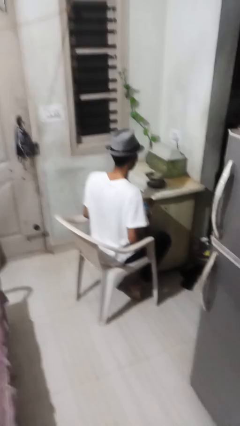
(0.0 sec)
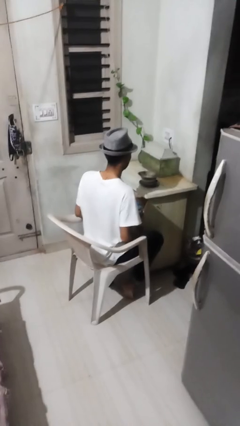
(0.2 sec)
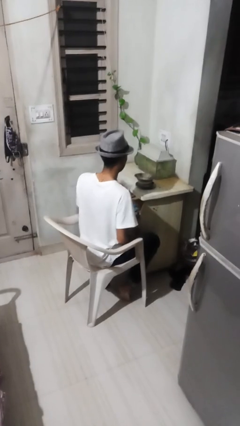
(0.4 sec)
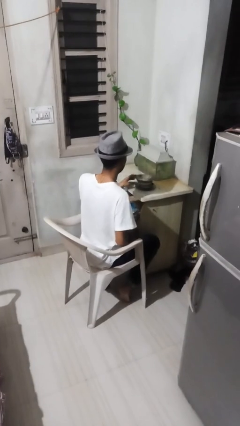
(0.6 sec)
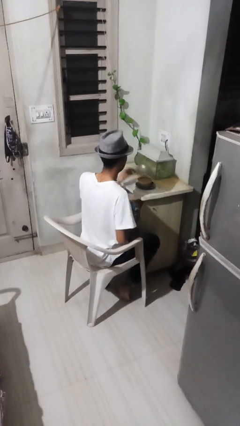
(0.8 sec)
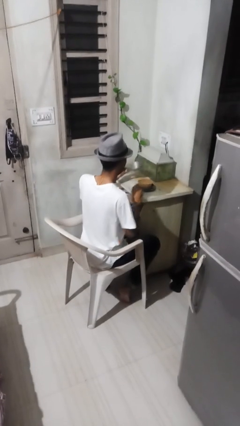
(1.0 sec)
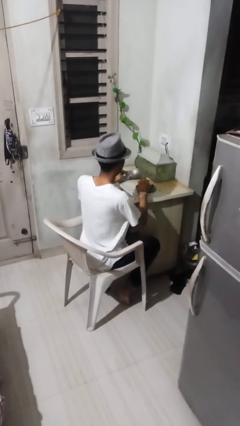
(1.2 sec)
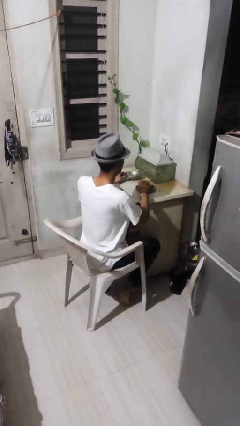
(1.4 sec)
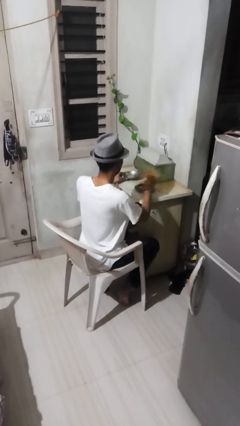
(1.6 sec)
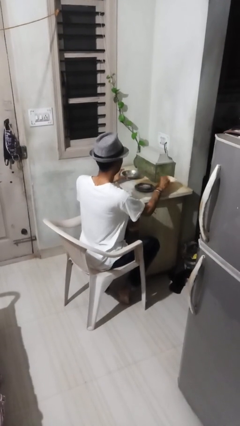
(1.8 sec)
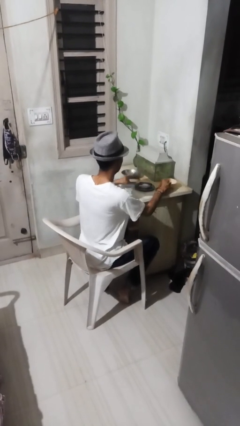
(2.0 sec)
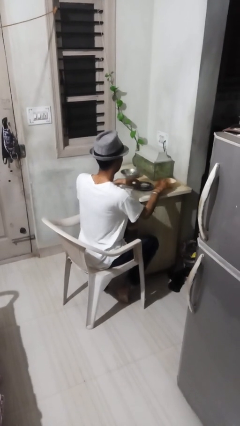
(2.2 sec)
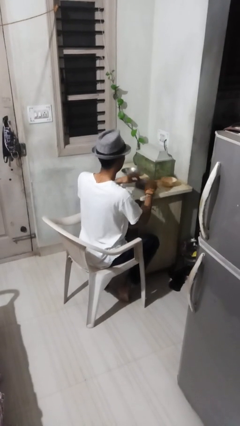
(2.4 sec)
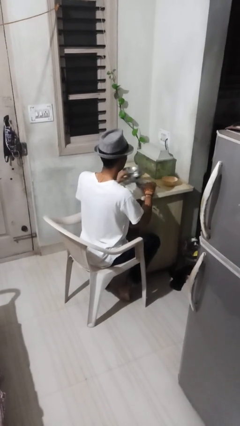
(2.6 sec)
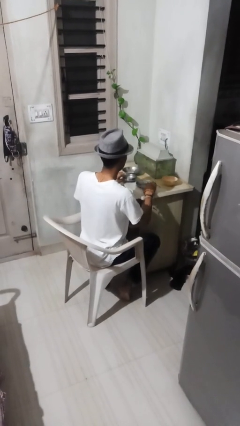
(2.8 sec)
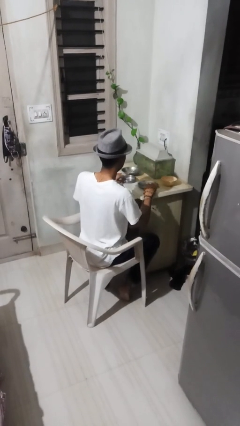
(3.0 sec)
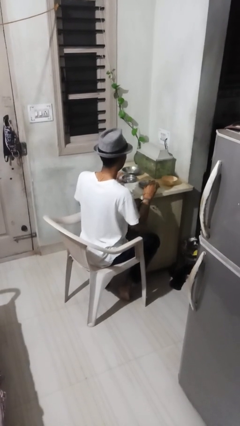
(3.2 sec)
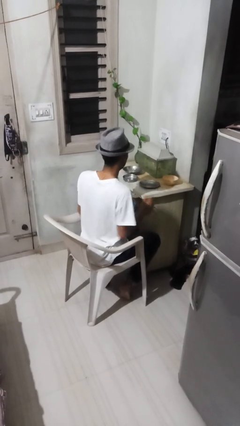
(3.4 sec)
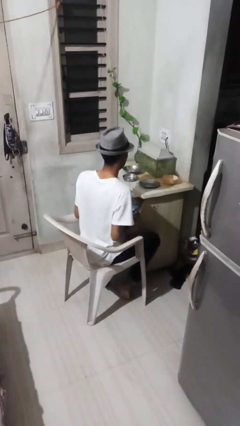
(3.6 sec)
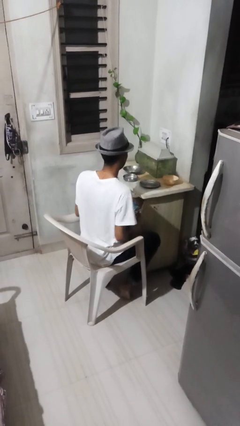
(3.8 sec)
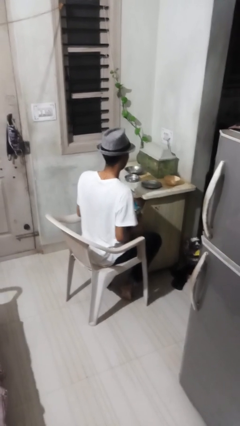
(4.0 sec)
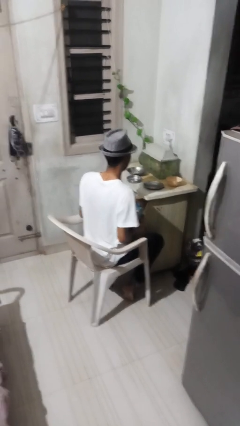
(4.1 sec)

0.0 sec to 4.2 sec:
person sets table

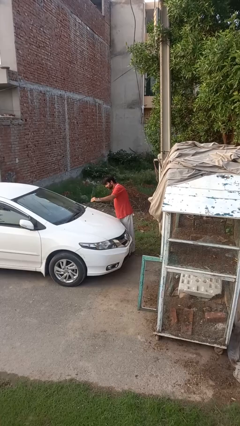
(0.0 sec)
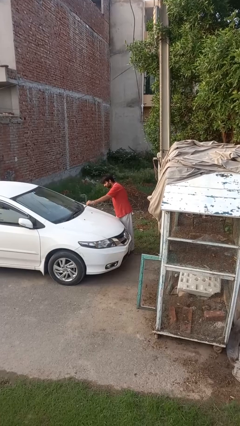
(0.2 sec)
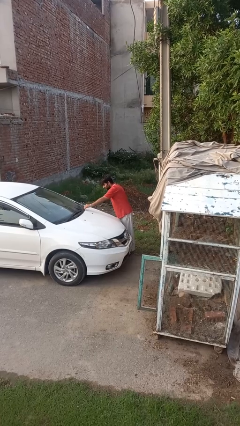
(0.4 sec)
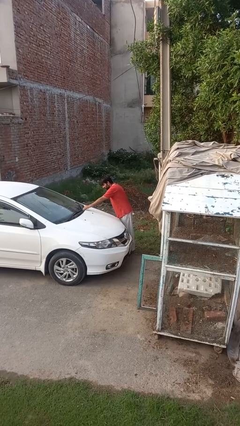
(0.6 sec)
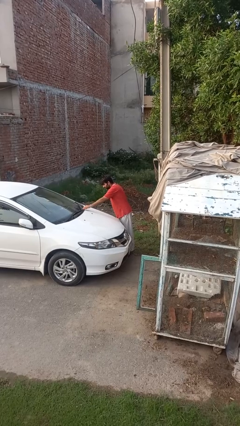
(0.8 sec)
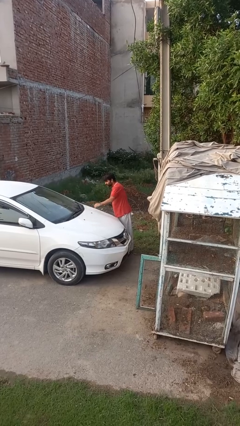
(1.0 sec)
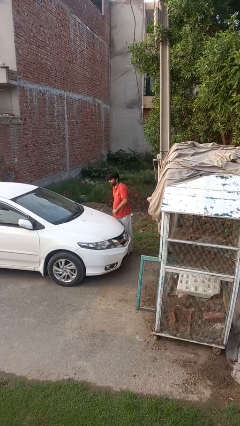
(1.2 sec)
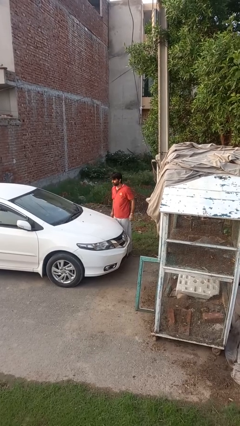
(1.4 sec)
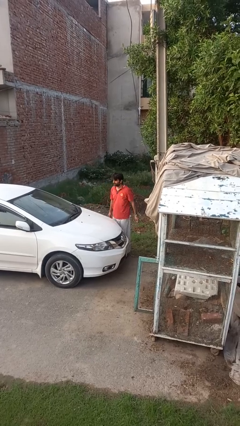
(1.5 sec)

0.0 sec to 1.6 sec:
person flips down car wipers

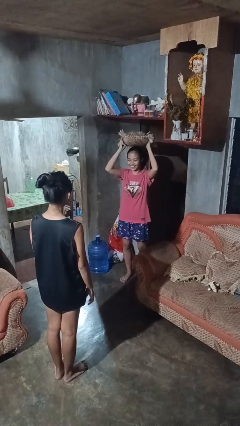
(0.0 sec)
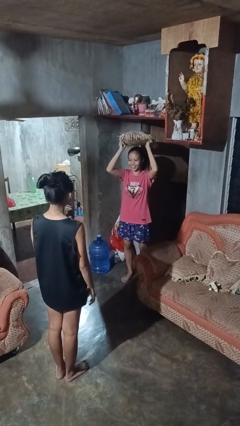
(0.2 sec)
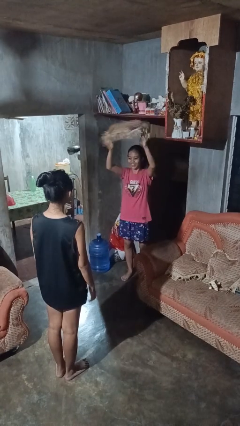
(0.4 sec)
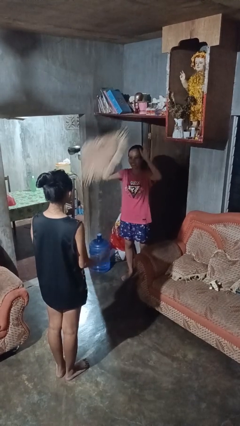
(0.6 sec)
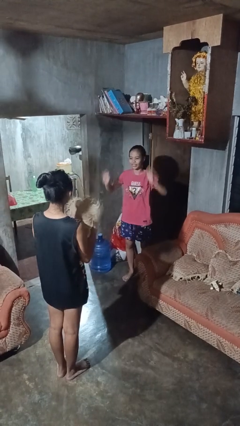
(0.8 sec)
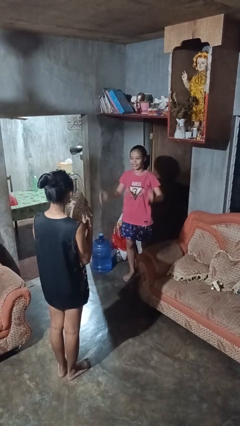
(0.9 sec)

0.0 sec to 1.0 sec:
person throws object to person

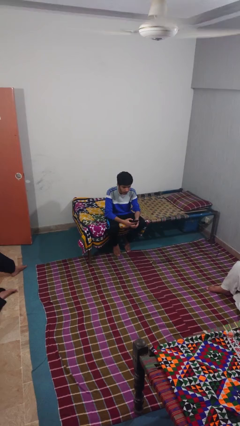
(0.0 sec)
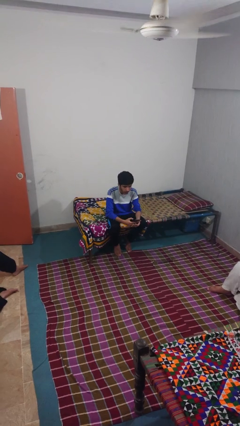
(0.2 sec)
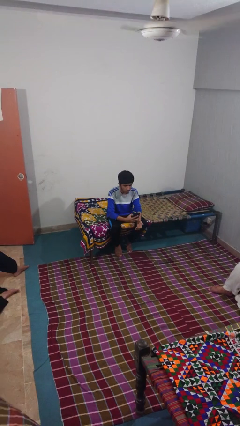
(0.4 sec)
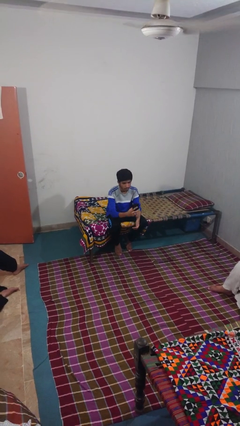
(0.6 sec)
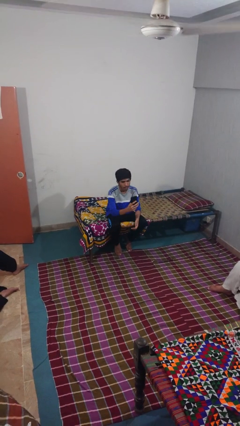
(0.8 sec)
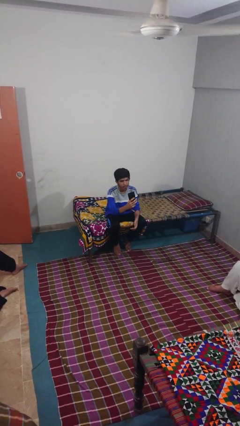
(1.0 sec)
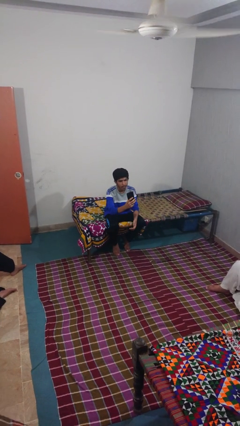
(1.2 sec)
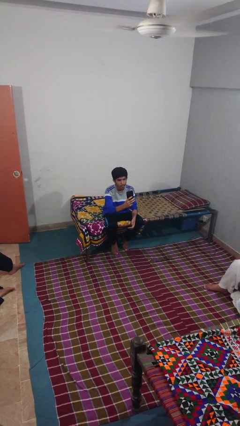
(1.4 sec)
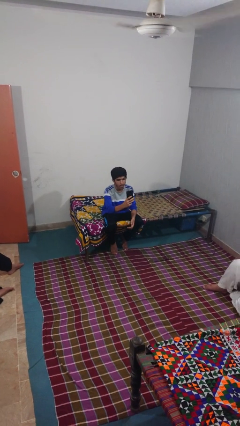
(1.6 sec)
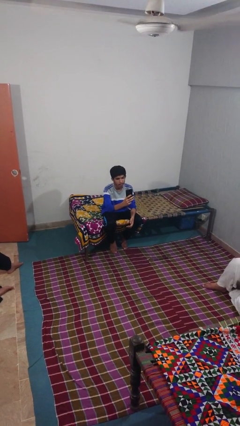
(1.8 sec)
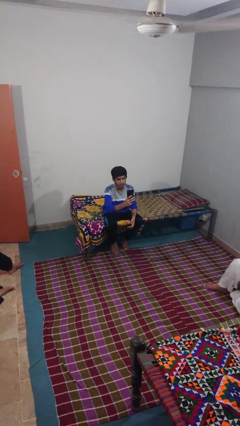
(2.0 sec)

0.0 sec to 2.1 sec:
person takes selfie

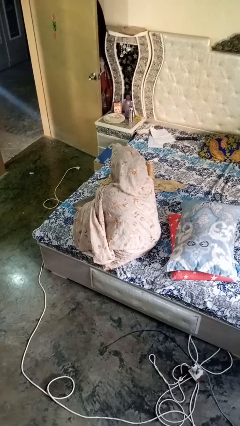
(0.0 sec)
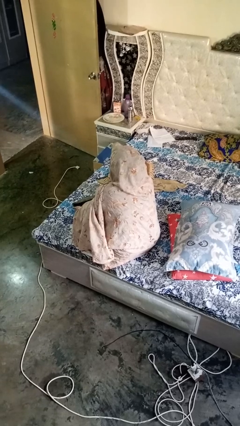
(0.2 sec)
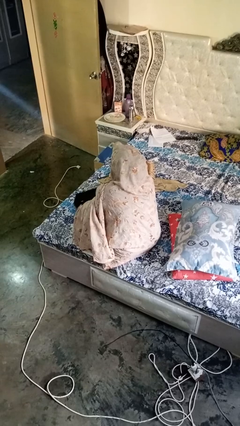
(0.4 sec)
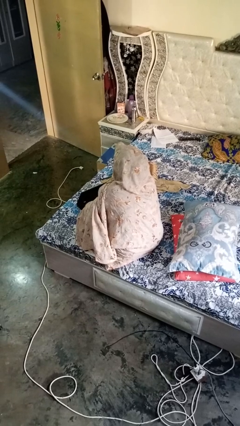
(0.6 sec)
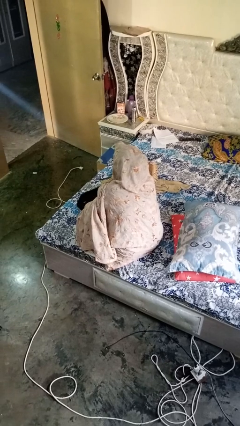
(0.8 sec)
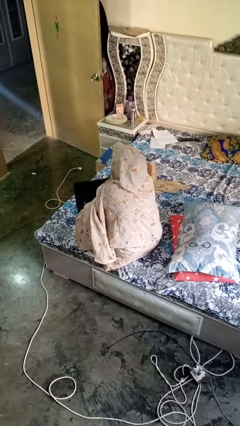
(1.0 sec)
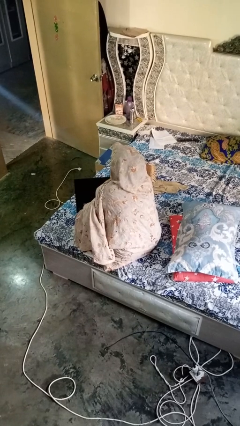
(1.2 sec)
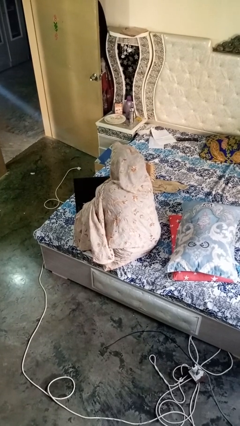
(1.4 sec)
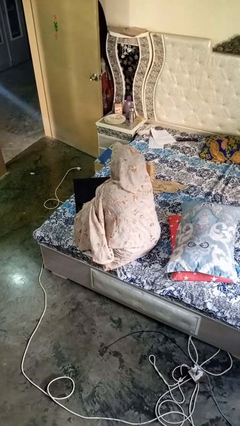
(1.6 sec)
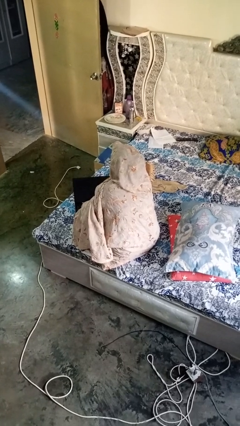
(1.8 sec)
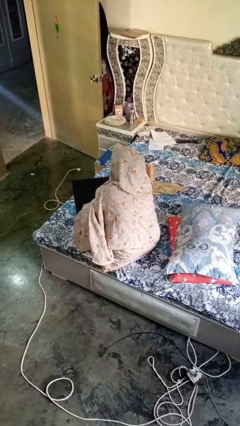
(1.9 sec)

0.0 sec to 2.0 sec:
person opens laptop

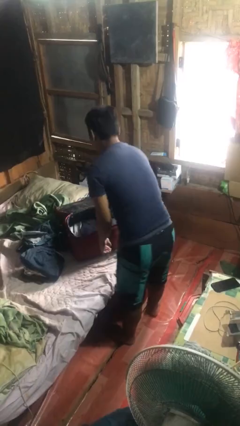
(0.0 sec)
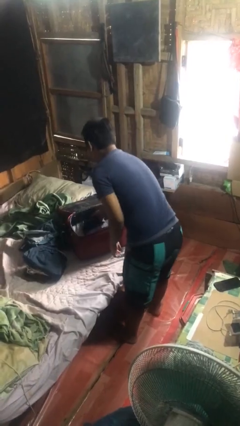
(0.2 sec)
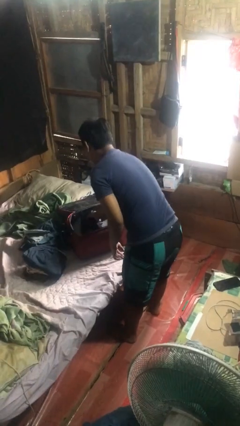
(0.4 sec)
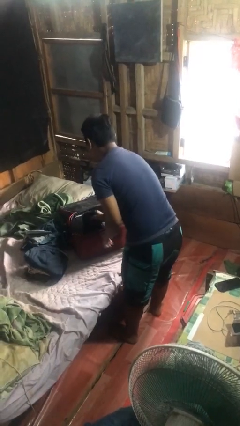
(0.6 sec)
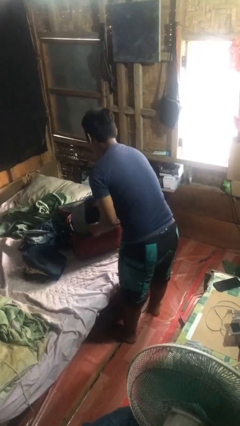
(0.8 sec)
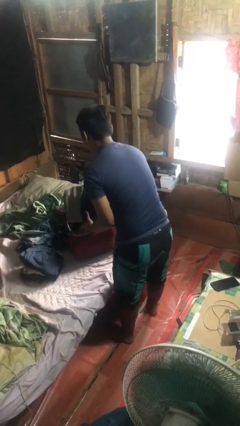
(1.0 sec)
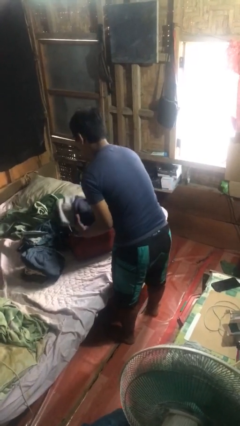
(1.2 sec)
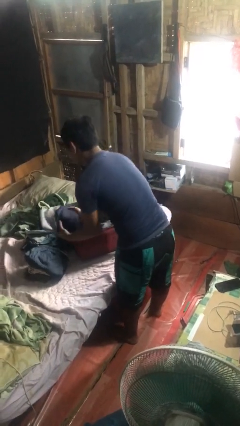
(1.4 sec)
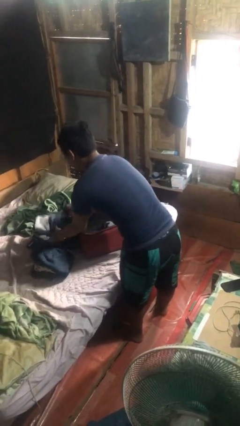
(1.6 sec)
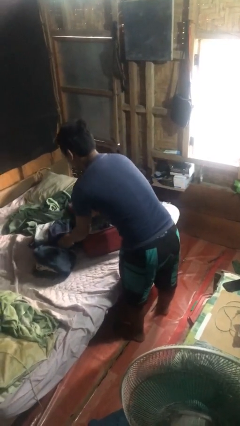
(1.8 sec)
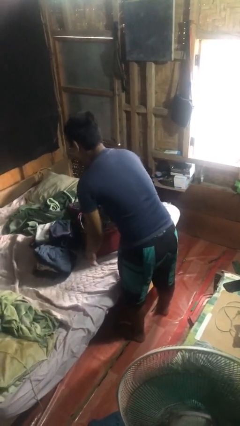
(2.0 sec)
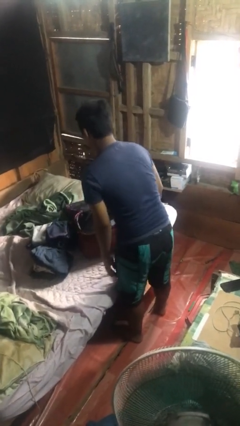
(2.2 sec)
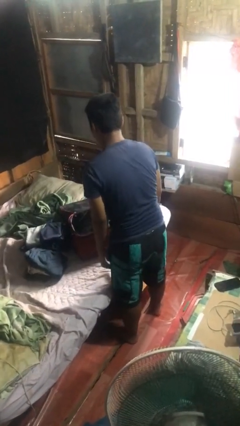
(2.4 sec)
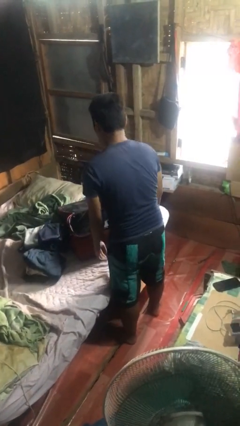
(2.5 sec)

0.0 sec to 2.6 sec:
person unloads clothes from suitcase

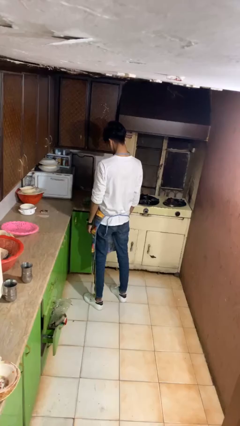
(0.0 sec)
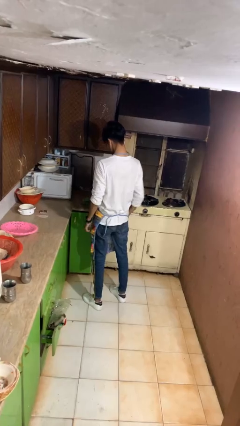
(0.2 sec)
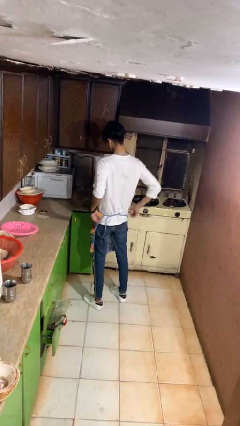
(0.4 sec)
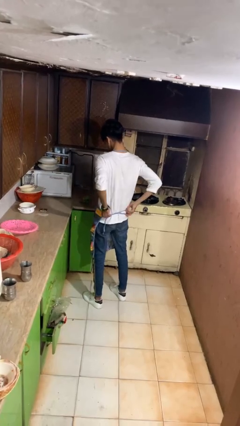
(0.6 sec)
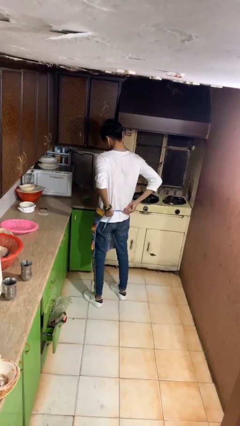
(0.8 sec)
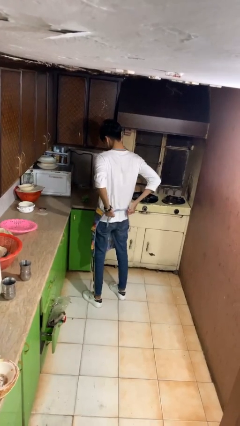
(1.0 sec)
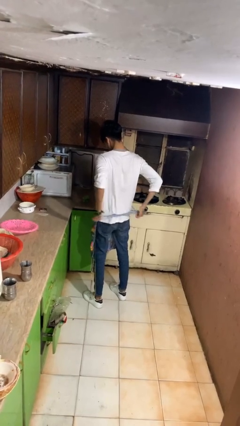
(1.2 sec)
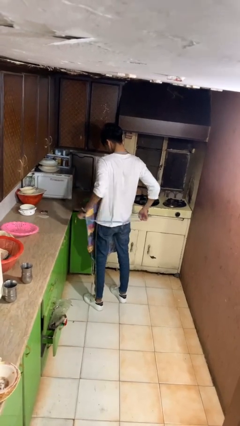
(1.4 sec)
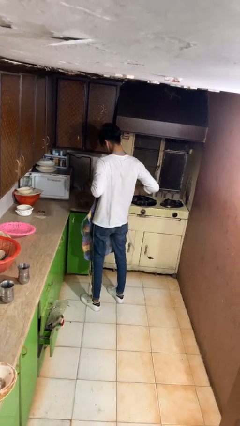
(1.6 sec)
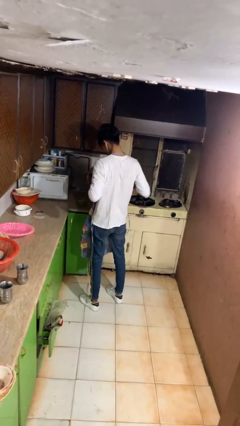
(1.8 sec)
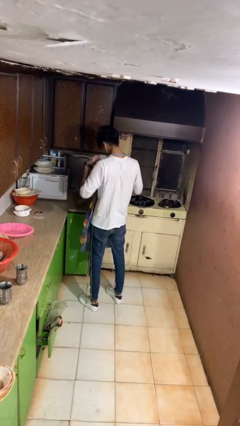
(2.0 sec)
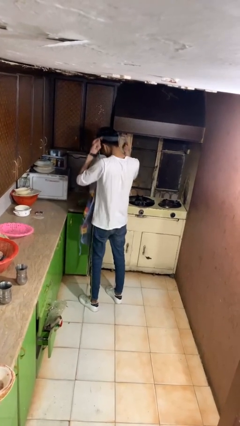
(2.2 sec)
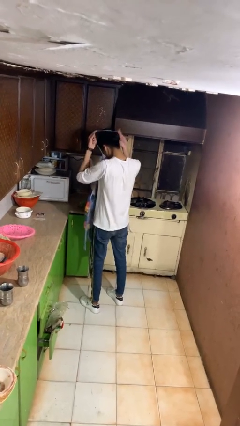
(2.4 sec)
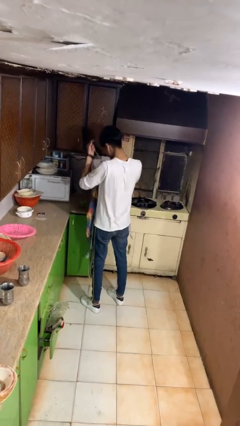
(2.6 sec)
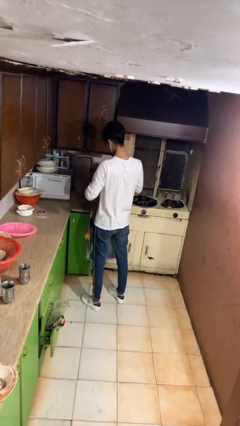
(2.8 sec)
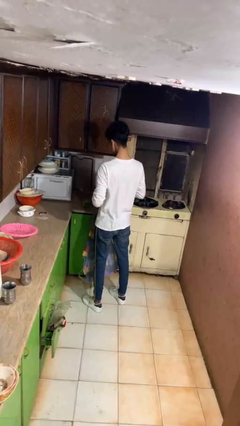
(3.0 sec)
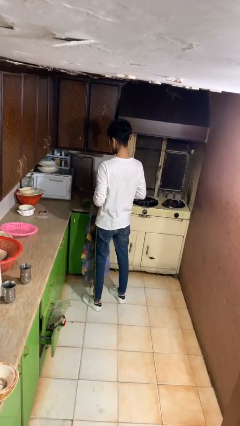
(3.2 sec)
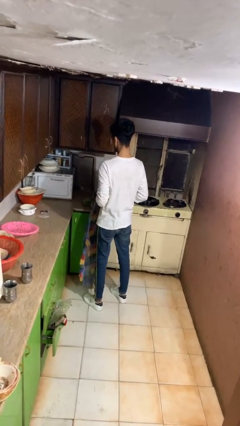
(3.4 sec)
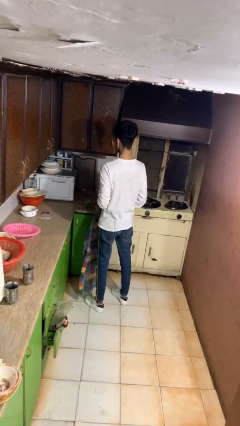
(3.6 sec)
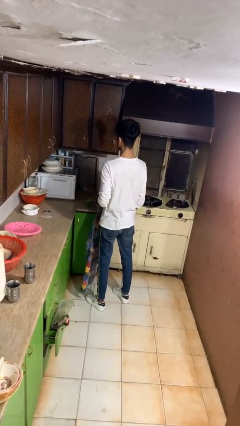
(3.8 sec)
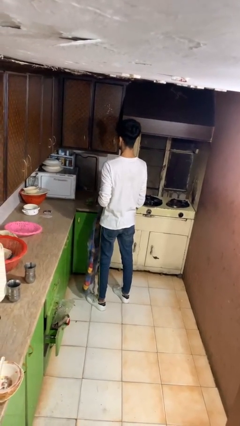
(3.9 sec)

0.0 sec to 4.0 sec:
person takes off apron
